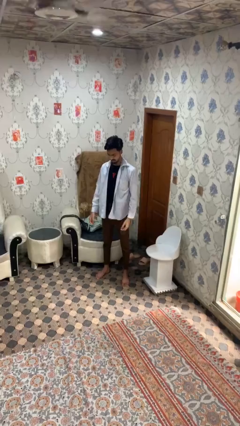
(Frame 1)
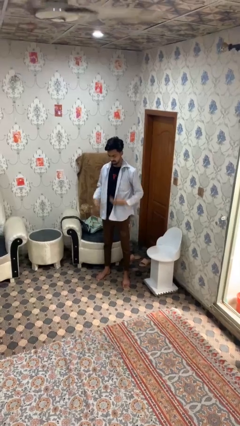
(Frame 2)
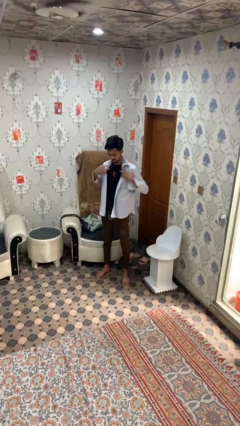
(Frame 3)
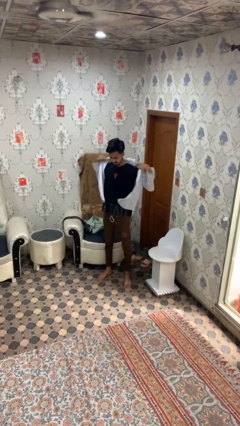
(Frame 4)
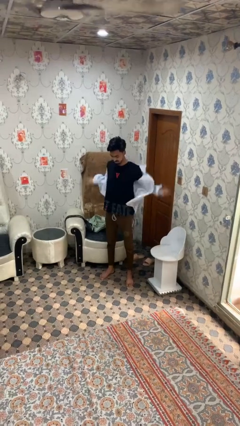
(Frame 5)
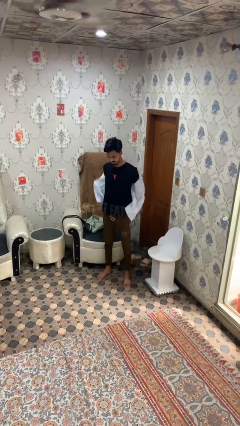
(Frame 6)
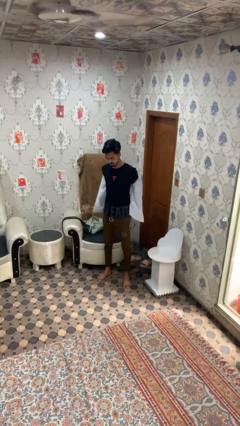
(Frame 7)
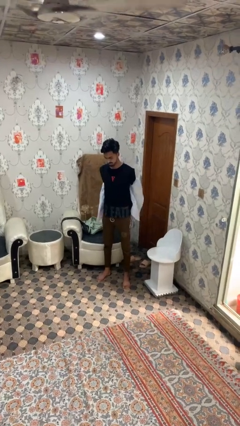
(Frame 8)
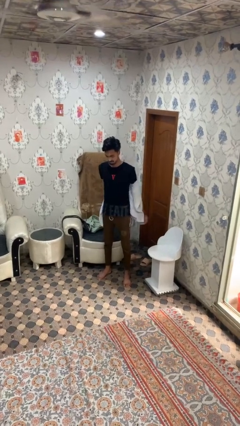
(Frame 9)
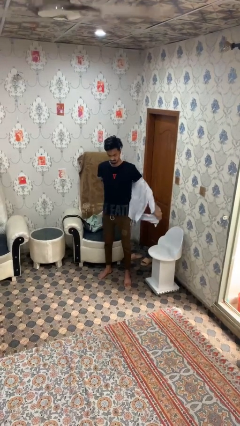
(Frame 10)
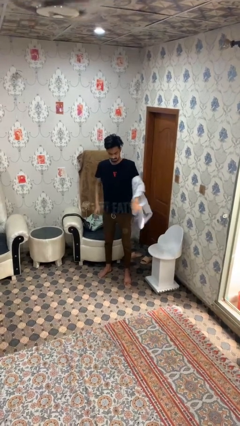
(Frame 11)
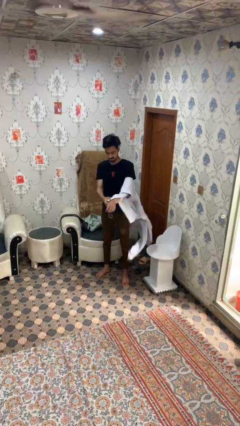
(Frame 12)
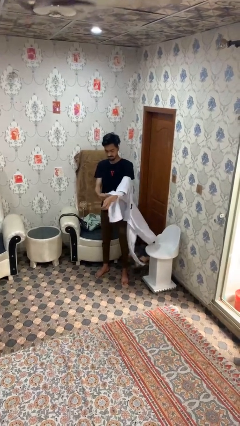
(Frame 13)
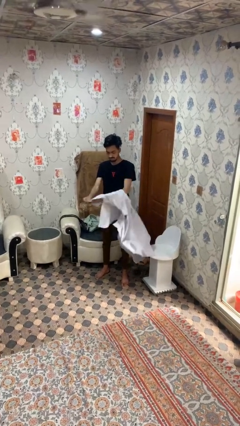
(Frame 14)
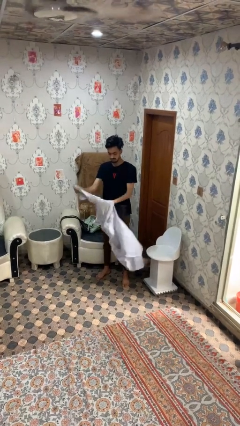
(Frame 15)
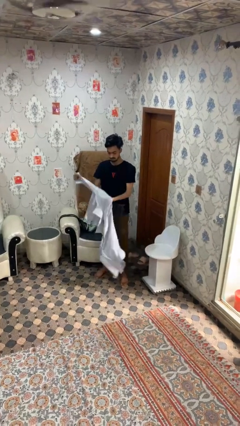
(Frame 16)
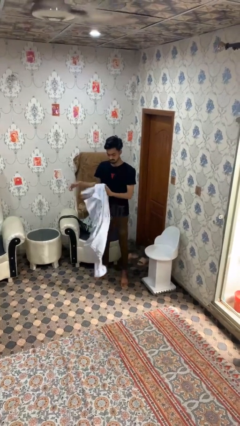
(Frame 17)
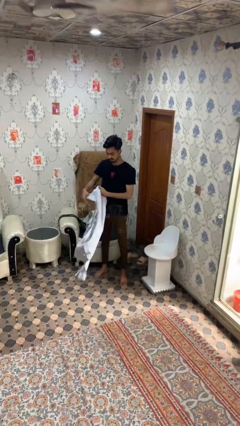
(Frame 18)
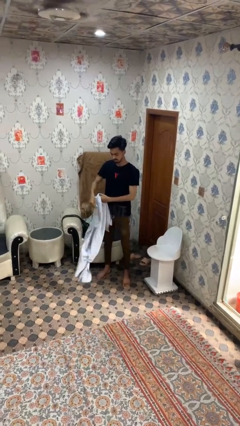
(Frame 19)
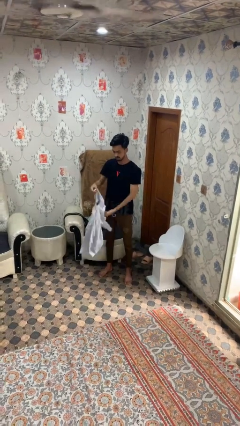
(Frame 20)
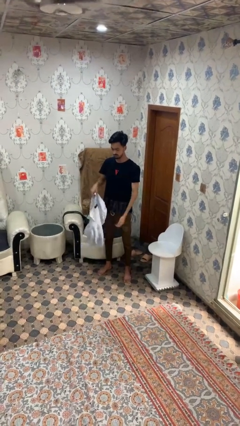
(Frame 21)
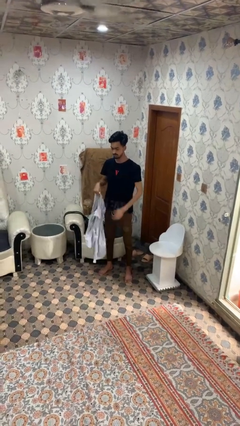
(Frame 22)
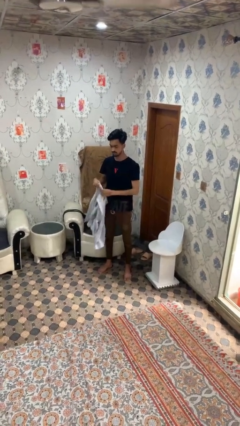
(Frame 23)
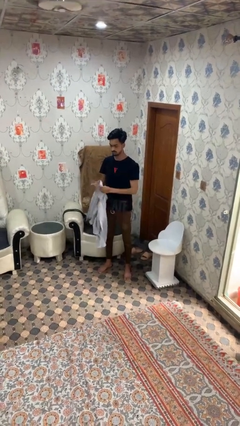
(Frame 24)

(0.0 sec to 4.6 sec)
person takes off shirt

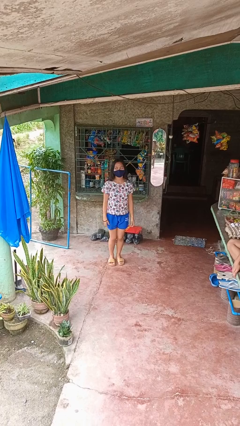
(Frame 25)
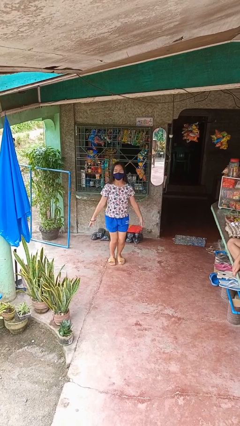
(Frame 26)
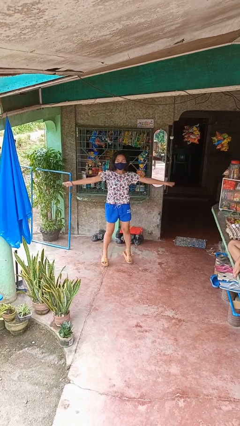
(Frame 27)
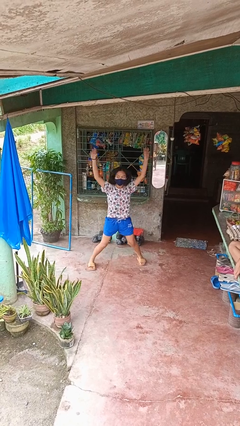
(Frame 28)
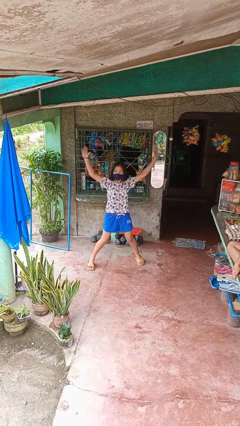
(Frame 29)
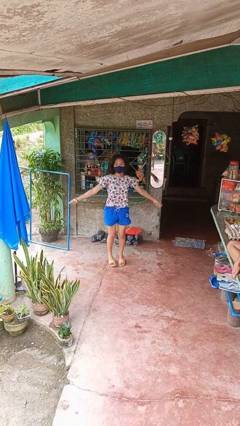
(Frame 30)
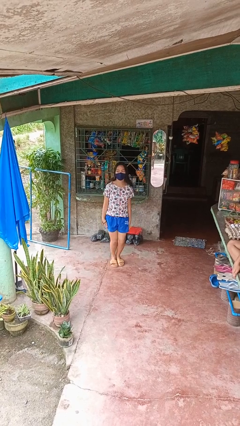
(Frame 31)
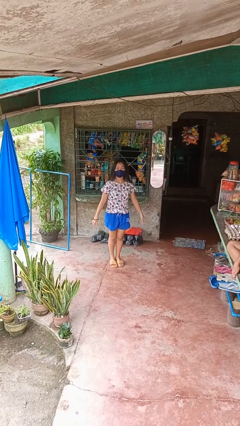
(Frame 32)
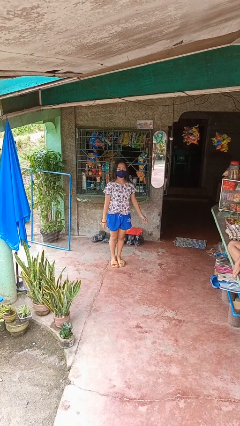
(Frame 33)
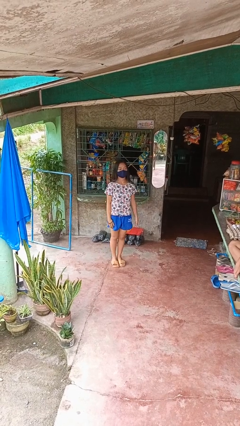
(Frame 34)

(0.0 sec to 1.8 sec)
person exercises with jumping jacks

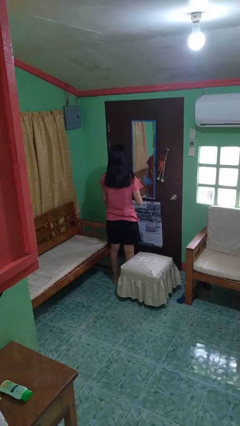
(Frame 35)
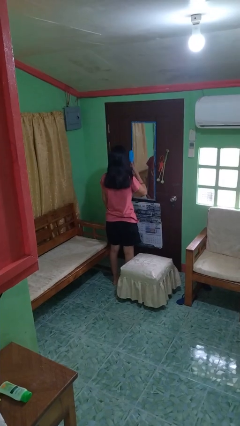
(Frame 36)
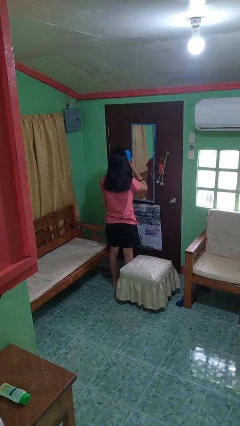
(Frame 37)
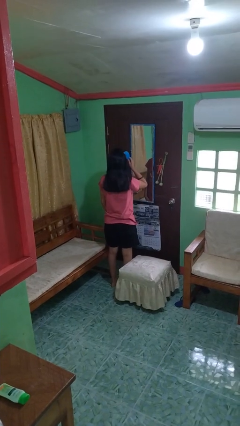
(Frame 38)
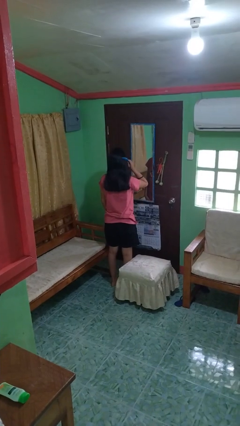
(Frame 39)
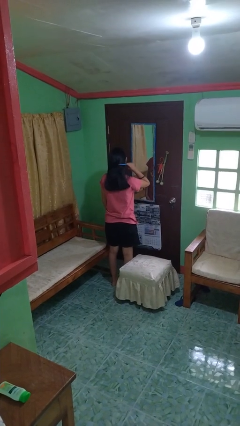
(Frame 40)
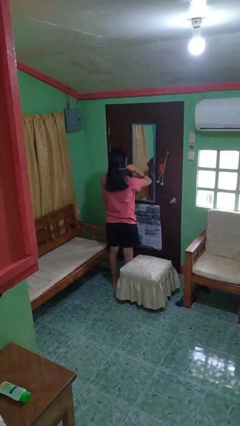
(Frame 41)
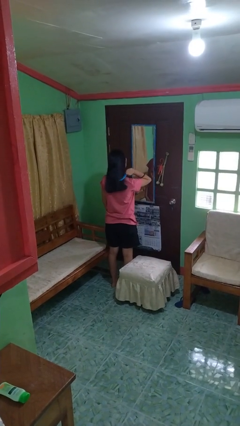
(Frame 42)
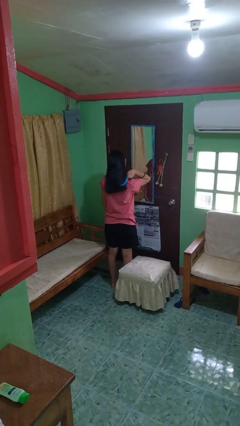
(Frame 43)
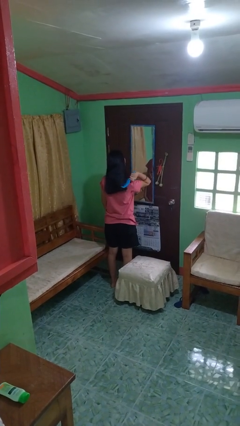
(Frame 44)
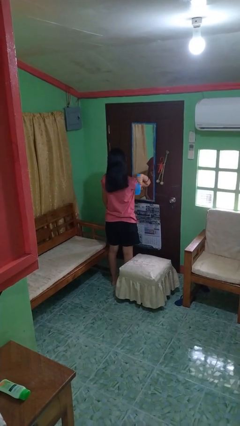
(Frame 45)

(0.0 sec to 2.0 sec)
person brushes hair

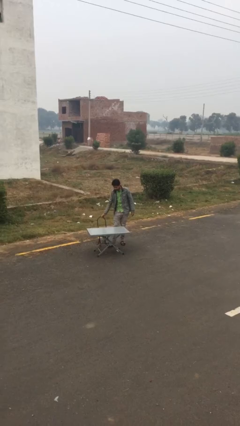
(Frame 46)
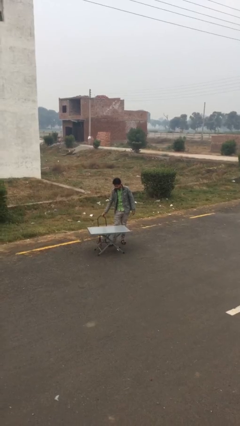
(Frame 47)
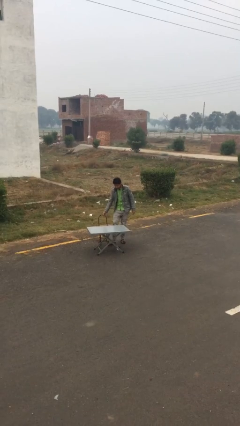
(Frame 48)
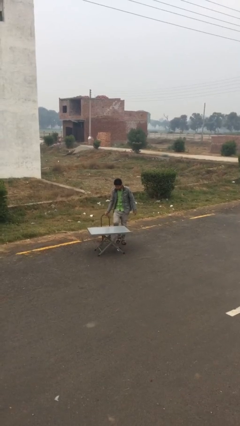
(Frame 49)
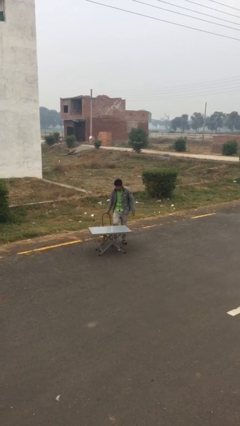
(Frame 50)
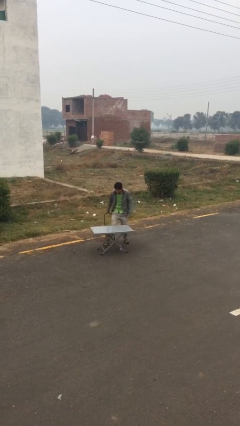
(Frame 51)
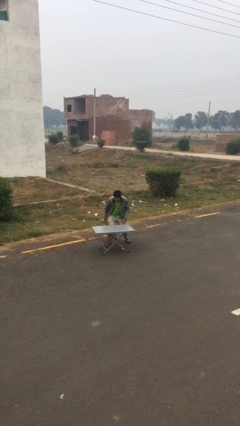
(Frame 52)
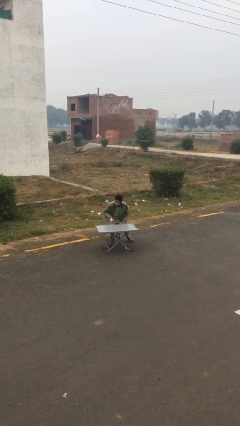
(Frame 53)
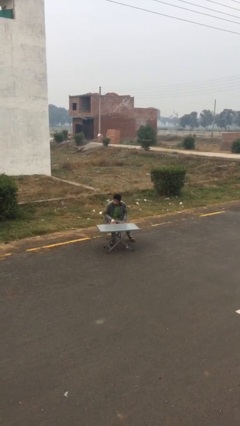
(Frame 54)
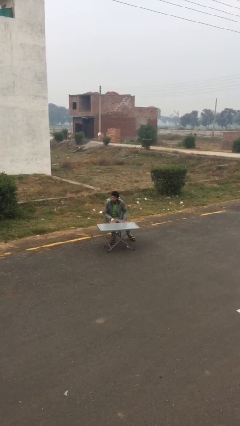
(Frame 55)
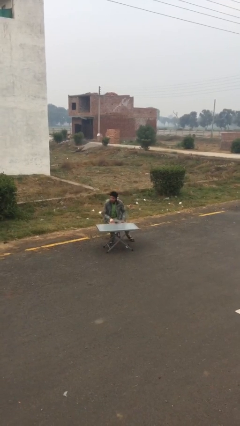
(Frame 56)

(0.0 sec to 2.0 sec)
person sits down

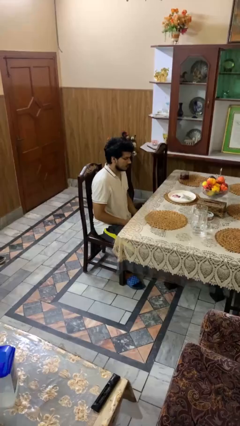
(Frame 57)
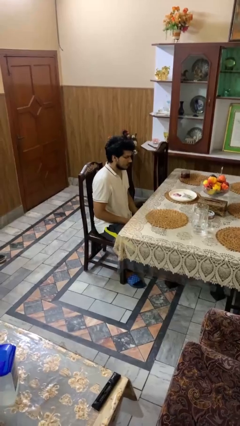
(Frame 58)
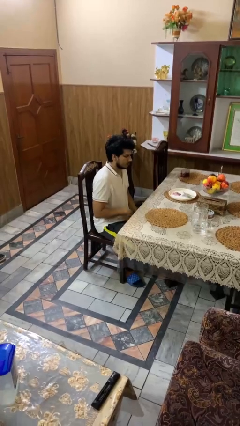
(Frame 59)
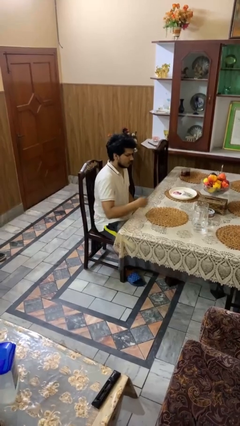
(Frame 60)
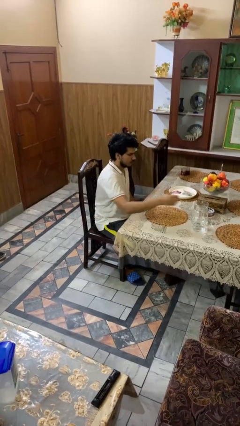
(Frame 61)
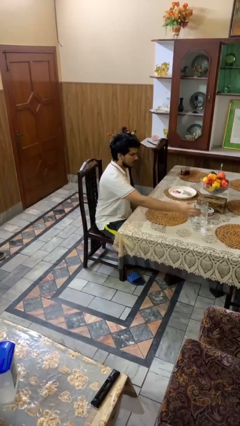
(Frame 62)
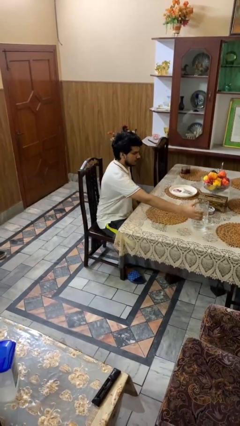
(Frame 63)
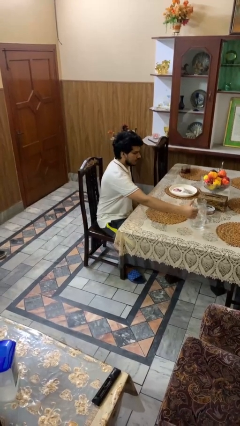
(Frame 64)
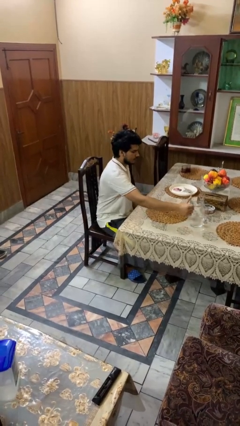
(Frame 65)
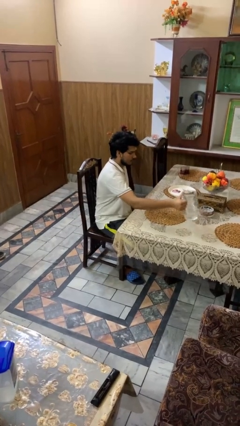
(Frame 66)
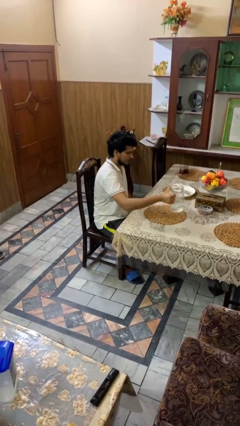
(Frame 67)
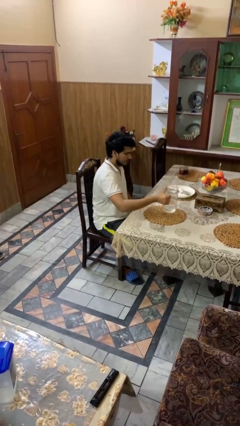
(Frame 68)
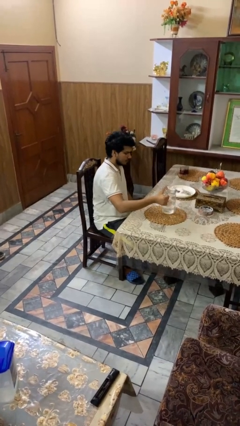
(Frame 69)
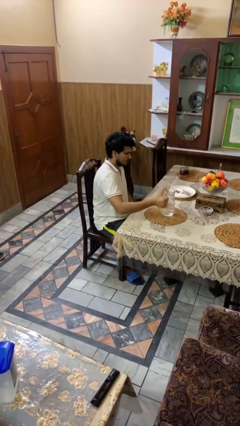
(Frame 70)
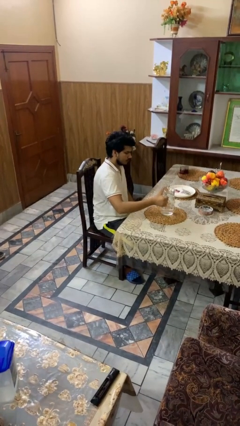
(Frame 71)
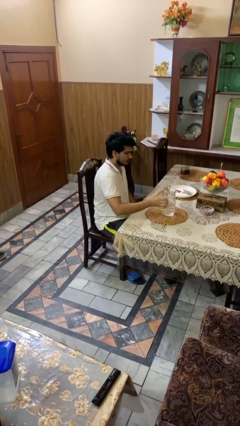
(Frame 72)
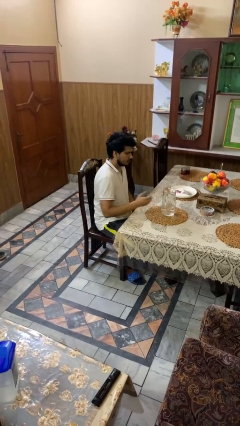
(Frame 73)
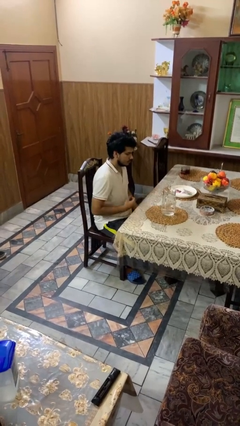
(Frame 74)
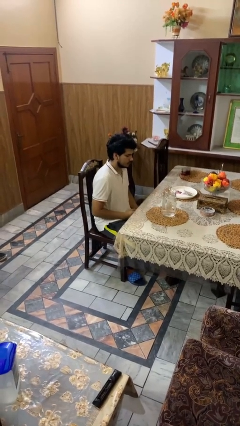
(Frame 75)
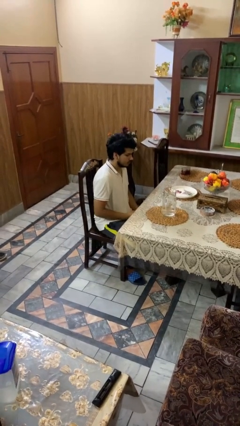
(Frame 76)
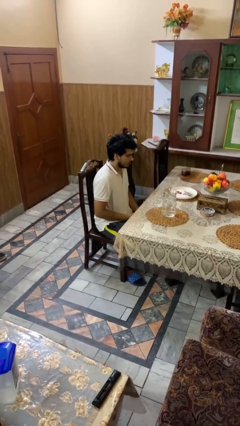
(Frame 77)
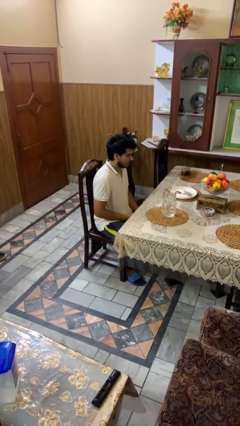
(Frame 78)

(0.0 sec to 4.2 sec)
person sets table

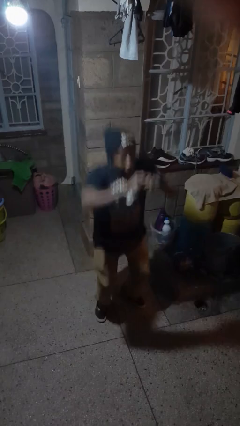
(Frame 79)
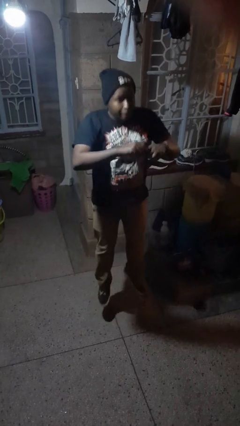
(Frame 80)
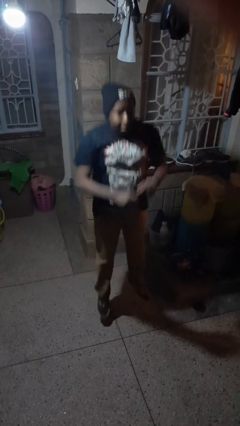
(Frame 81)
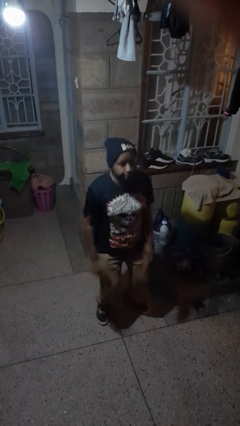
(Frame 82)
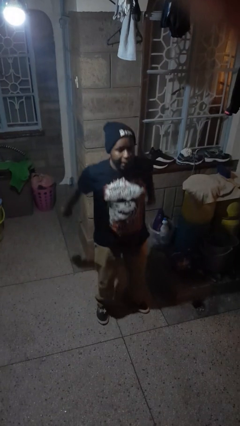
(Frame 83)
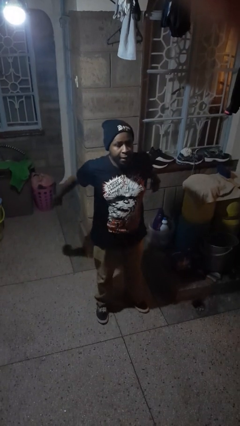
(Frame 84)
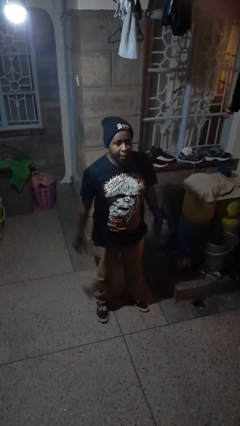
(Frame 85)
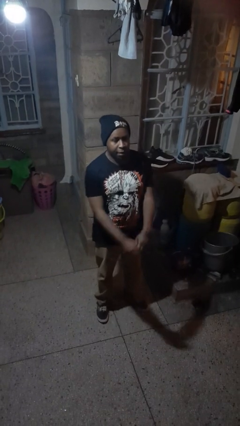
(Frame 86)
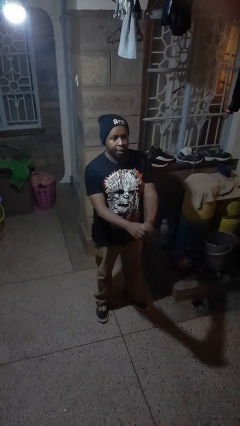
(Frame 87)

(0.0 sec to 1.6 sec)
person jumps

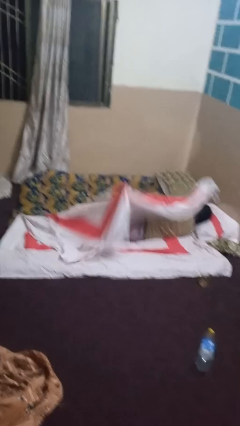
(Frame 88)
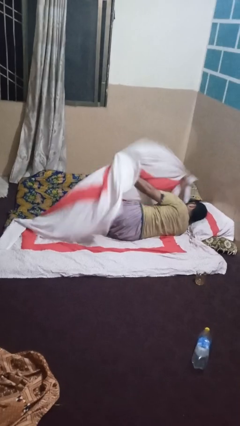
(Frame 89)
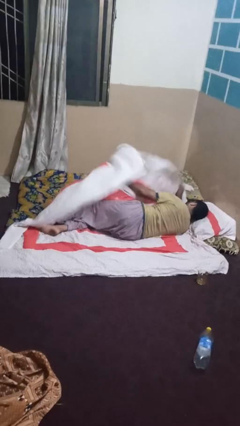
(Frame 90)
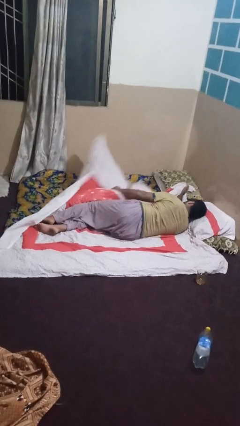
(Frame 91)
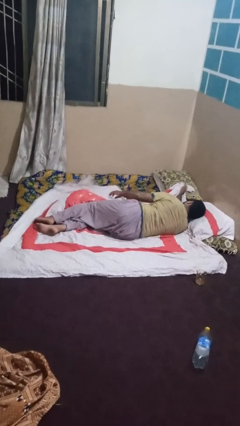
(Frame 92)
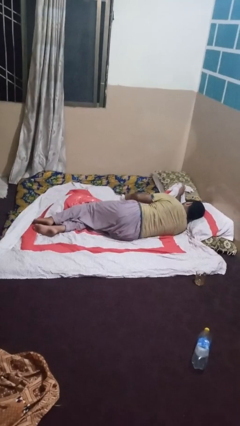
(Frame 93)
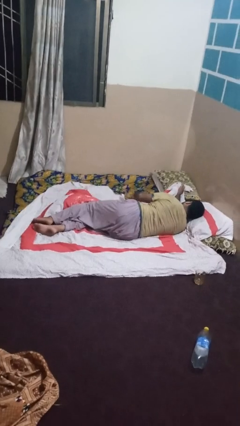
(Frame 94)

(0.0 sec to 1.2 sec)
person uncovers with bedsheets
